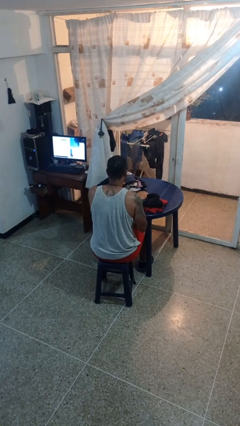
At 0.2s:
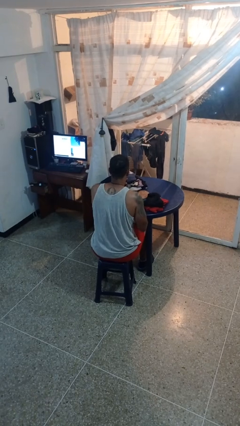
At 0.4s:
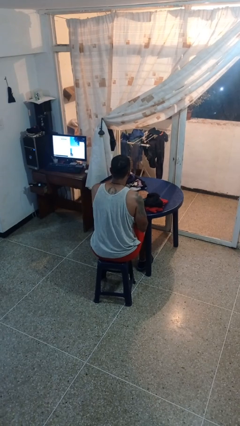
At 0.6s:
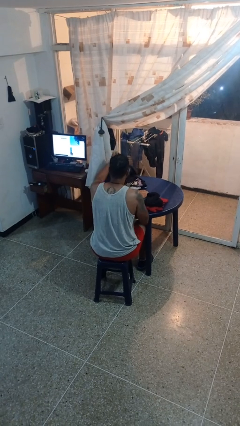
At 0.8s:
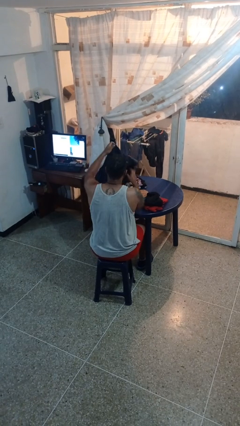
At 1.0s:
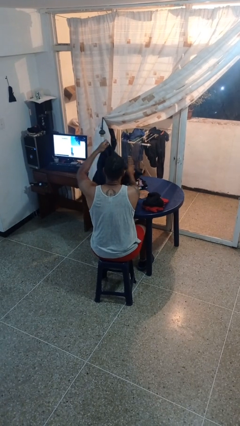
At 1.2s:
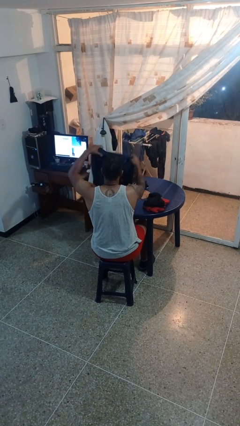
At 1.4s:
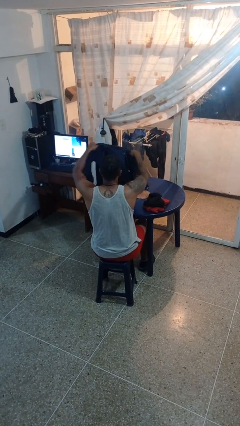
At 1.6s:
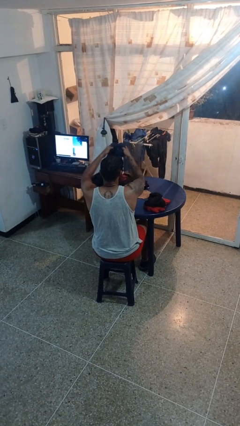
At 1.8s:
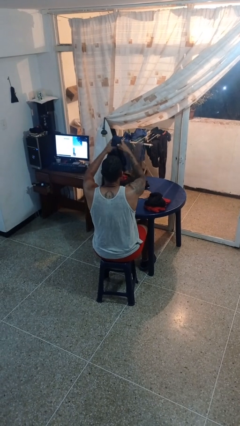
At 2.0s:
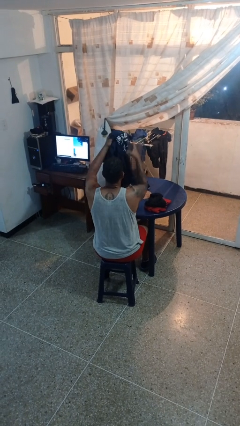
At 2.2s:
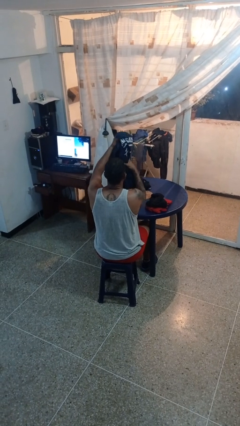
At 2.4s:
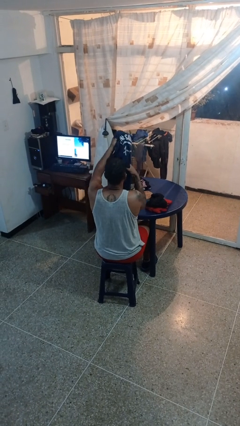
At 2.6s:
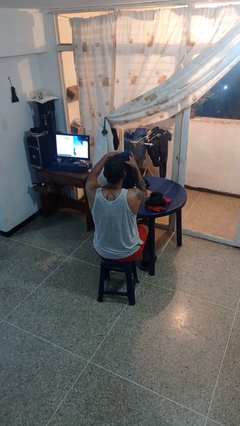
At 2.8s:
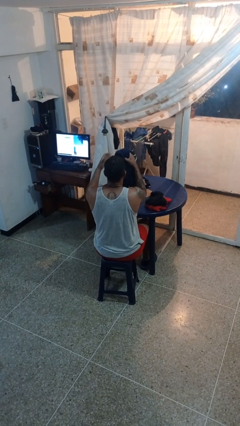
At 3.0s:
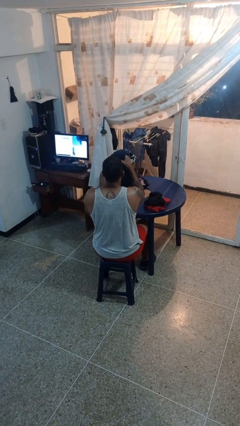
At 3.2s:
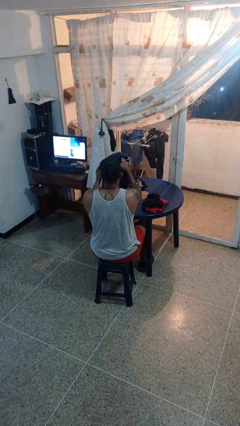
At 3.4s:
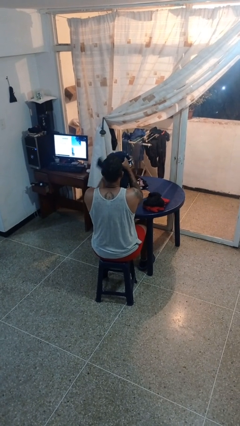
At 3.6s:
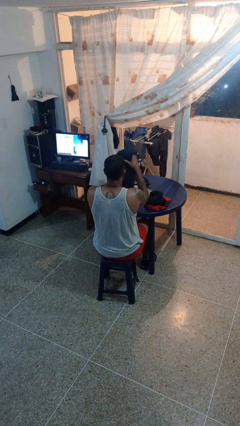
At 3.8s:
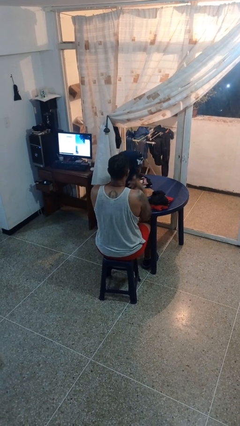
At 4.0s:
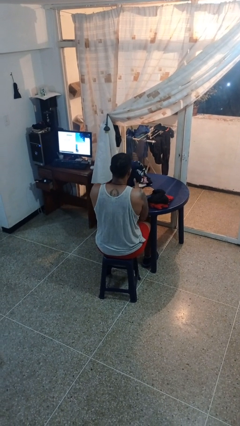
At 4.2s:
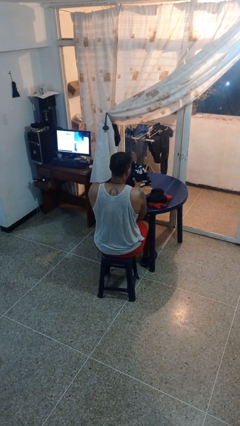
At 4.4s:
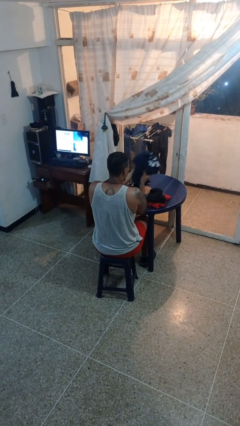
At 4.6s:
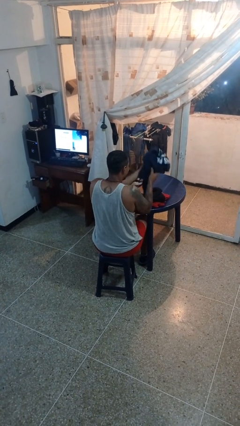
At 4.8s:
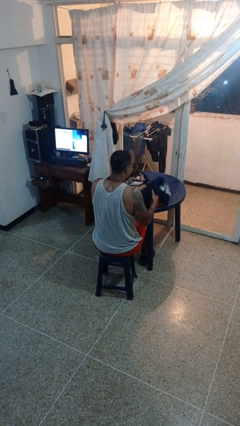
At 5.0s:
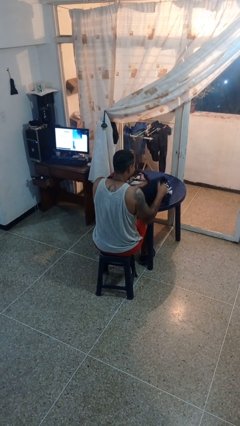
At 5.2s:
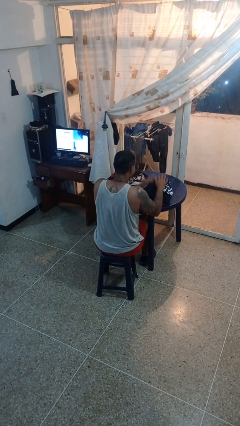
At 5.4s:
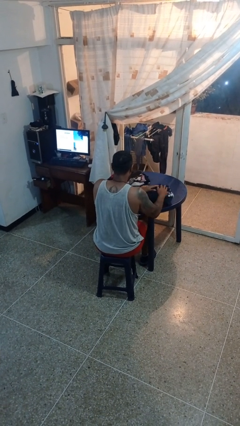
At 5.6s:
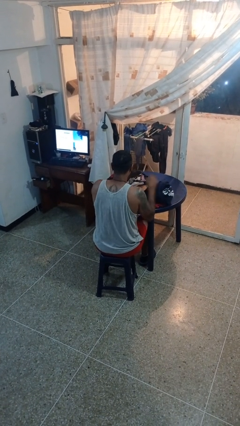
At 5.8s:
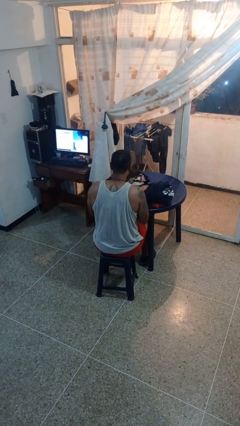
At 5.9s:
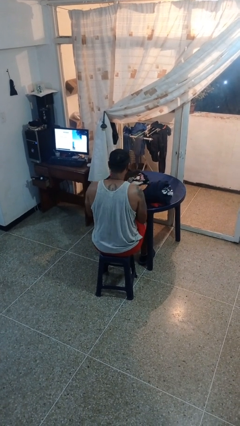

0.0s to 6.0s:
person folds shirt

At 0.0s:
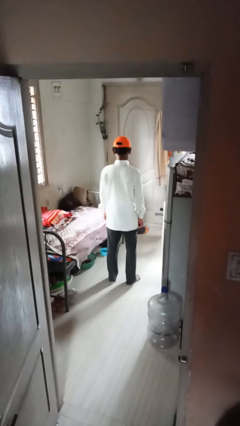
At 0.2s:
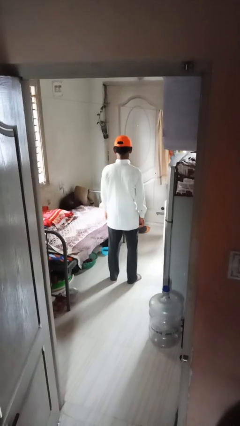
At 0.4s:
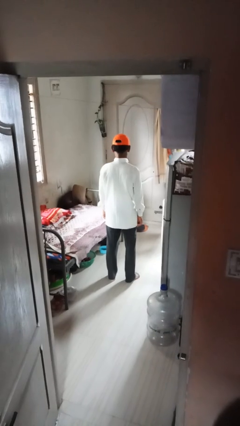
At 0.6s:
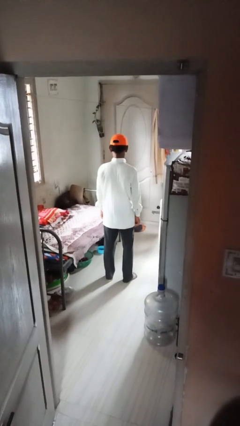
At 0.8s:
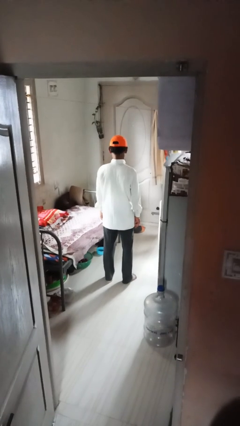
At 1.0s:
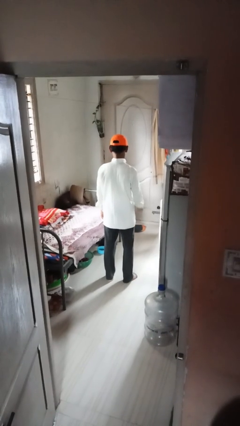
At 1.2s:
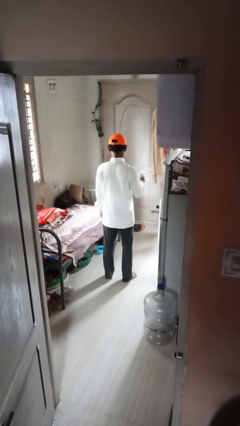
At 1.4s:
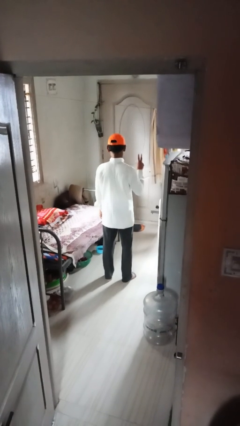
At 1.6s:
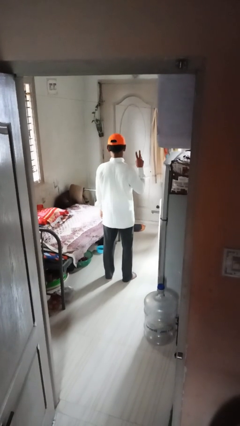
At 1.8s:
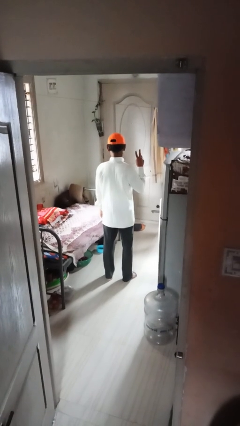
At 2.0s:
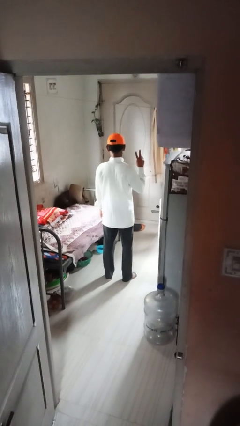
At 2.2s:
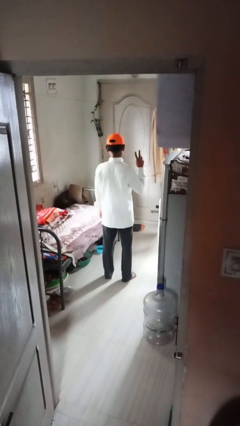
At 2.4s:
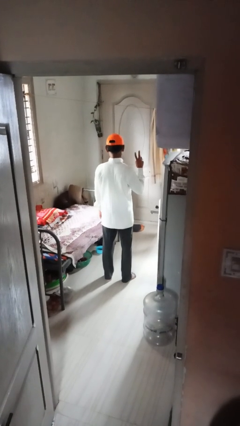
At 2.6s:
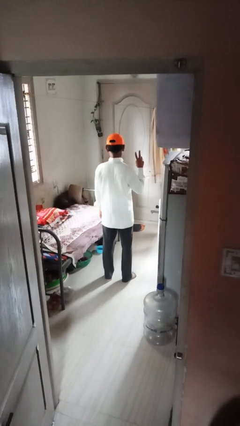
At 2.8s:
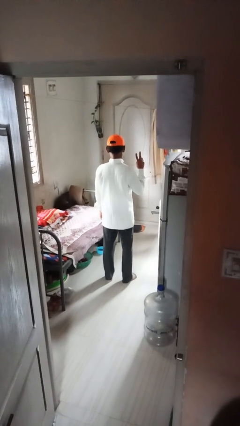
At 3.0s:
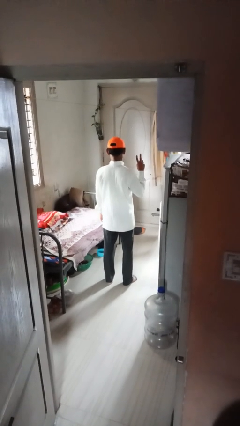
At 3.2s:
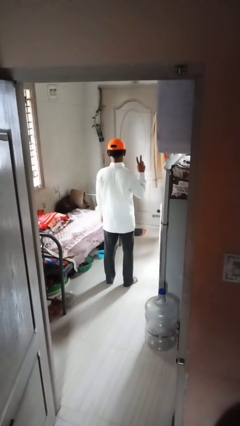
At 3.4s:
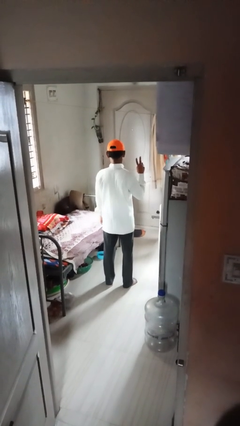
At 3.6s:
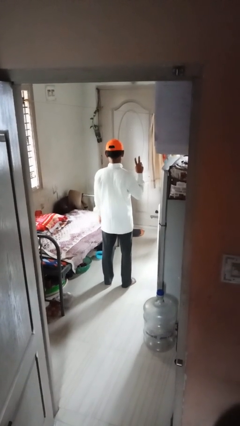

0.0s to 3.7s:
person gestures peace

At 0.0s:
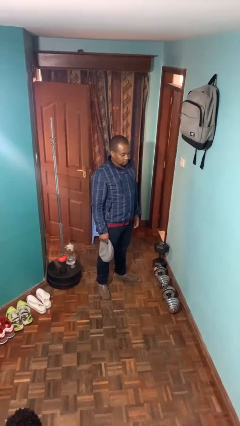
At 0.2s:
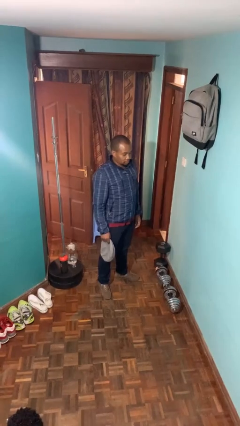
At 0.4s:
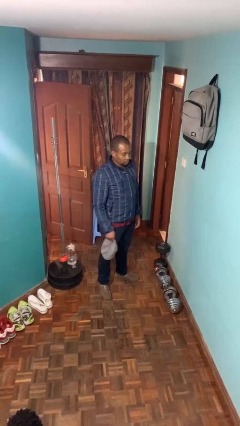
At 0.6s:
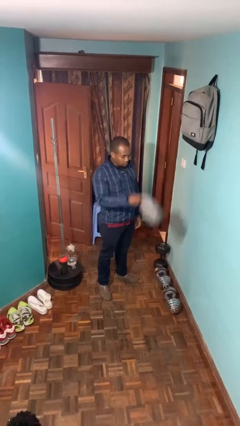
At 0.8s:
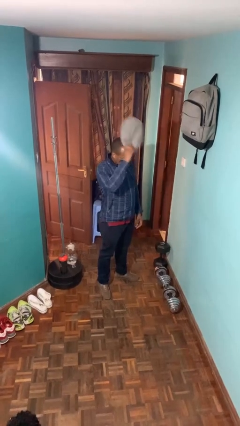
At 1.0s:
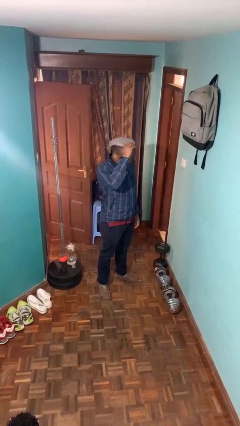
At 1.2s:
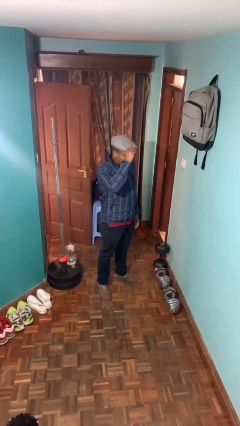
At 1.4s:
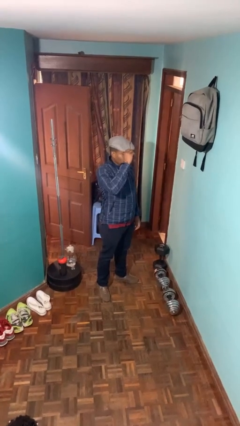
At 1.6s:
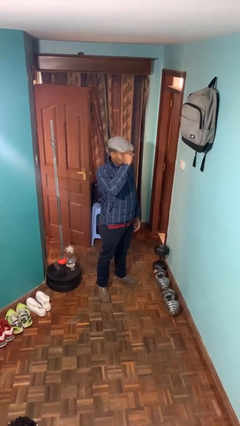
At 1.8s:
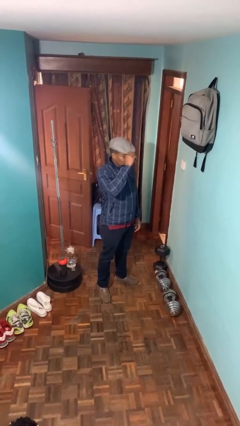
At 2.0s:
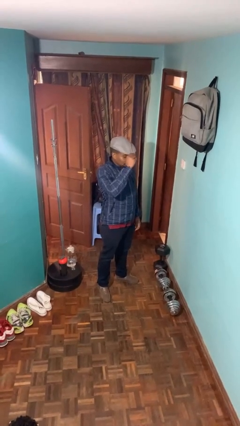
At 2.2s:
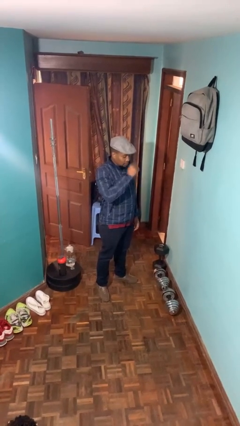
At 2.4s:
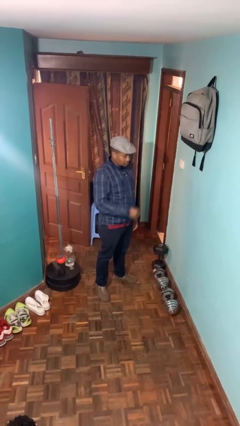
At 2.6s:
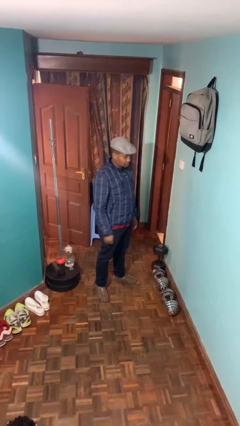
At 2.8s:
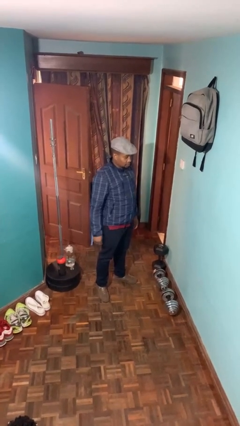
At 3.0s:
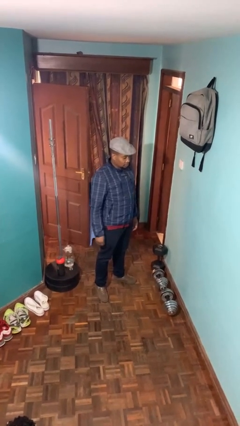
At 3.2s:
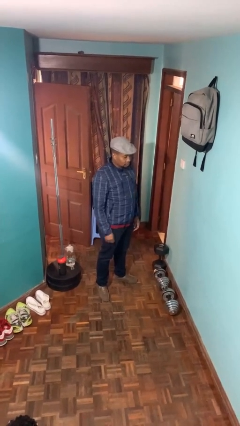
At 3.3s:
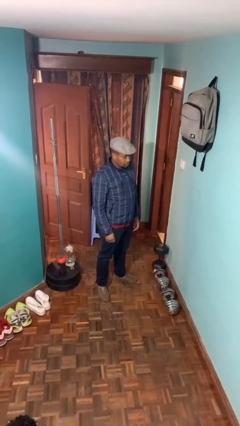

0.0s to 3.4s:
person puts on hat

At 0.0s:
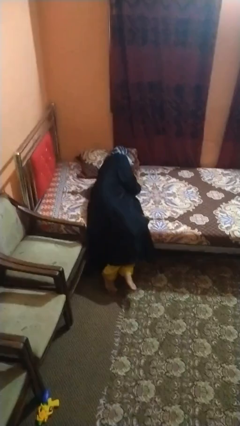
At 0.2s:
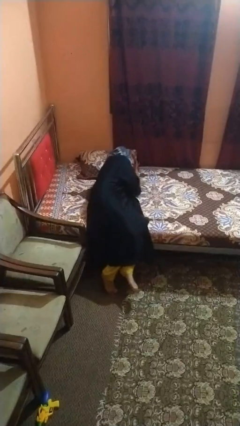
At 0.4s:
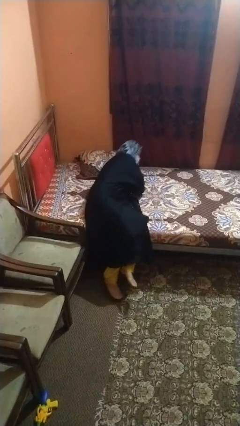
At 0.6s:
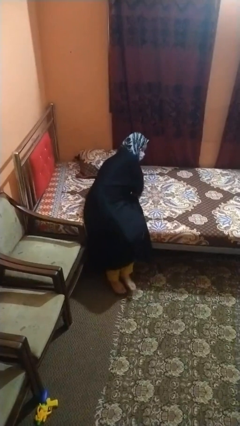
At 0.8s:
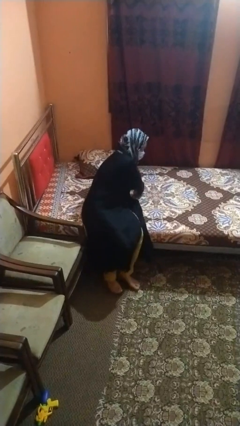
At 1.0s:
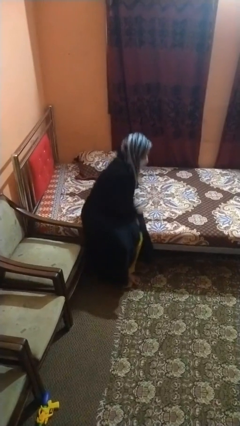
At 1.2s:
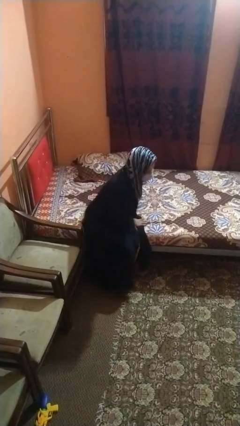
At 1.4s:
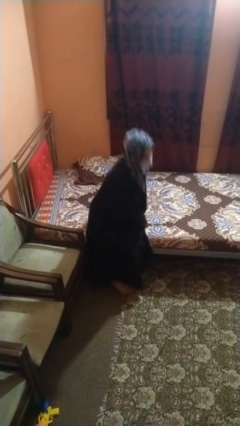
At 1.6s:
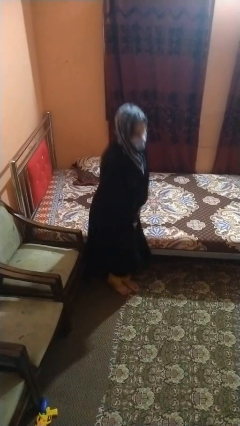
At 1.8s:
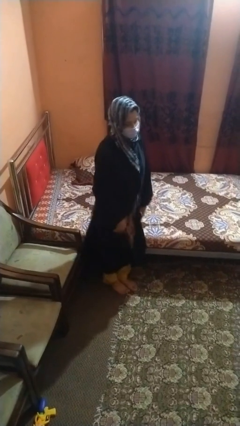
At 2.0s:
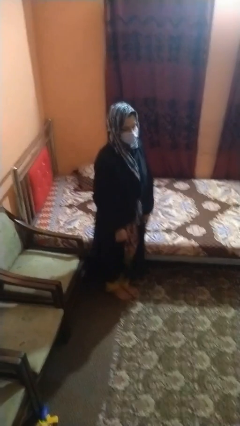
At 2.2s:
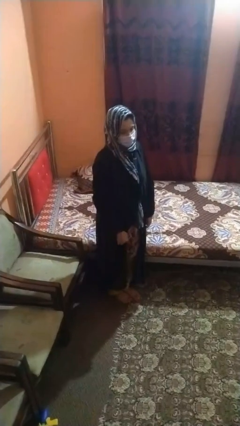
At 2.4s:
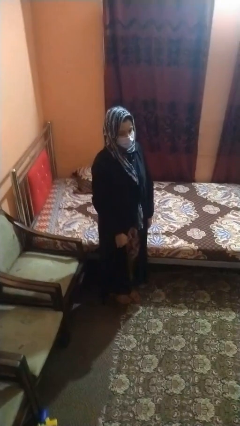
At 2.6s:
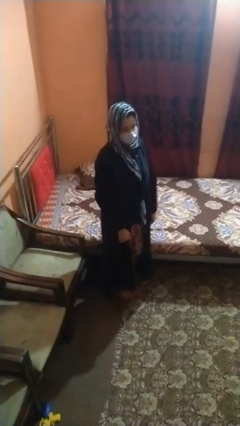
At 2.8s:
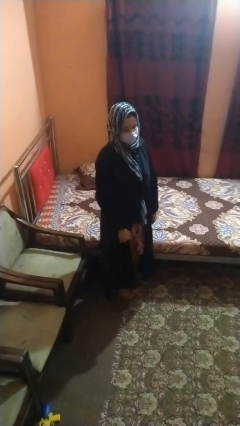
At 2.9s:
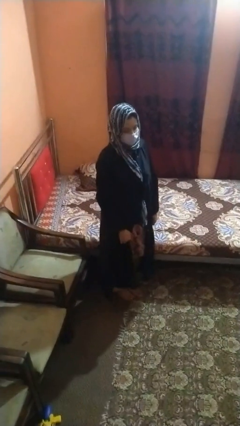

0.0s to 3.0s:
person stands up

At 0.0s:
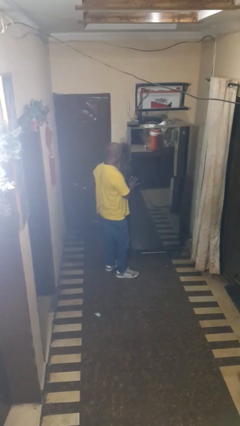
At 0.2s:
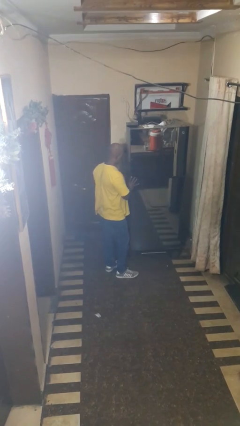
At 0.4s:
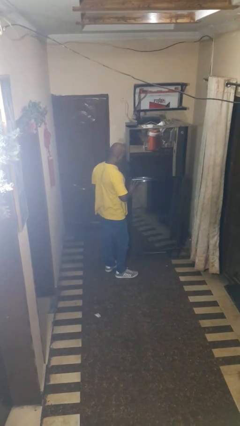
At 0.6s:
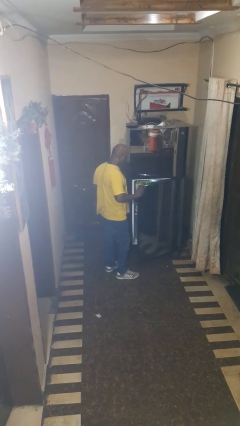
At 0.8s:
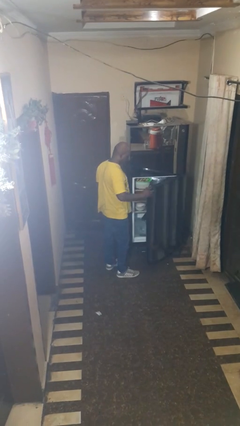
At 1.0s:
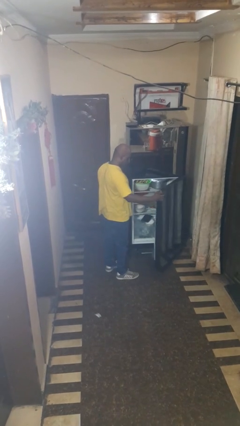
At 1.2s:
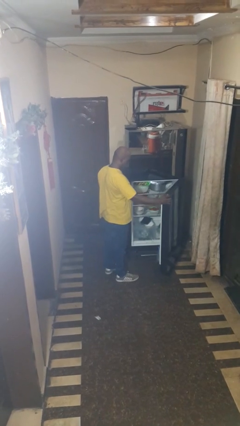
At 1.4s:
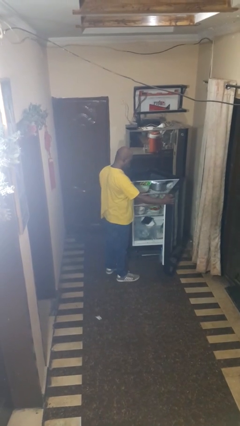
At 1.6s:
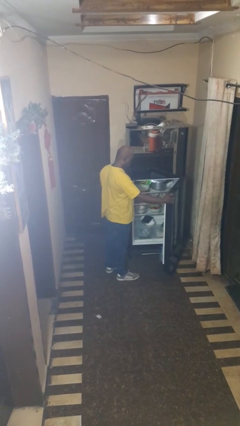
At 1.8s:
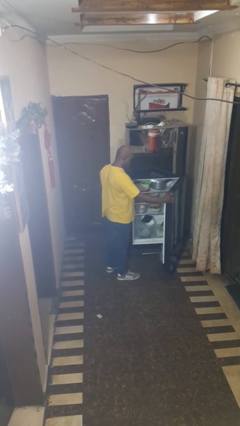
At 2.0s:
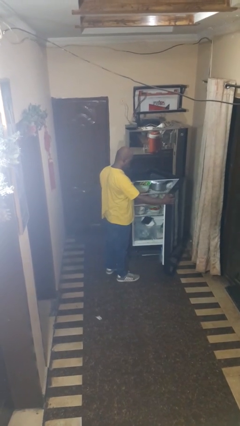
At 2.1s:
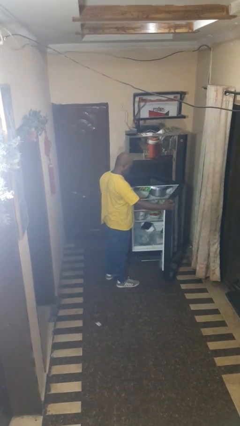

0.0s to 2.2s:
person opens refrigerator
